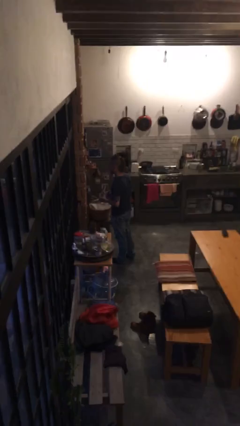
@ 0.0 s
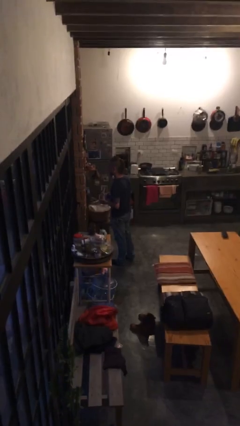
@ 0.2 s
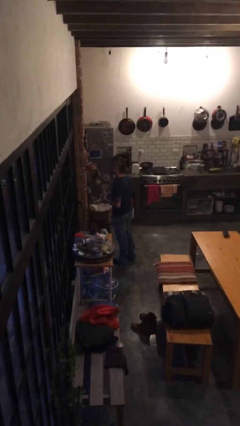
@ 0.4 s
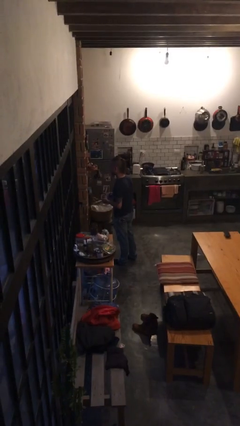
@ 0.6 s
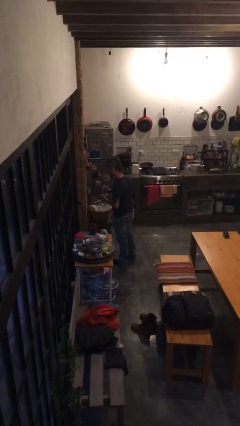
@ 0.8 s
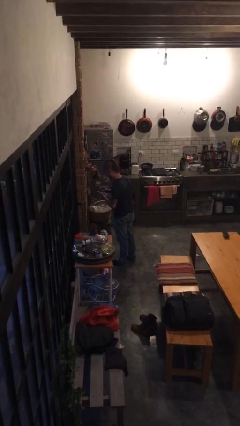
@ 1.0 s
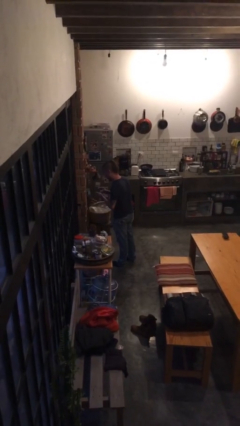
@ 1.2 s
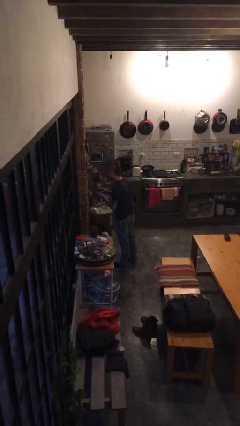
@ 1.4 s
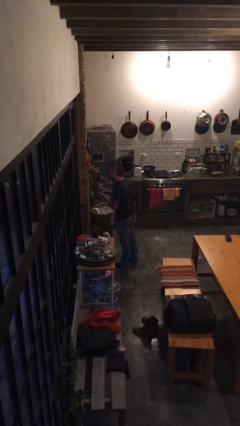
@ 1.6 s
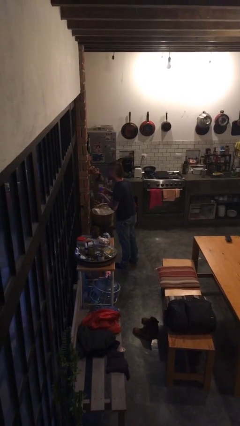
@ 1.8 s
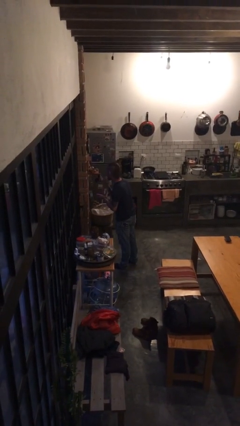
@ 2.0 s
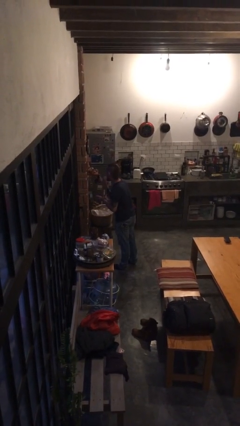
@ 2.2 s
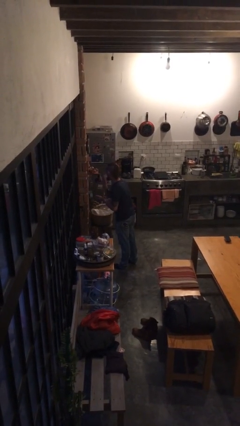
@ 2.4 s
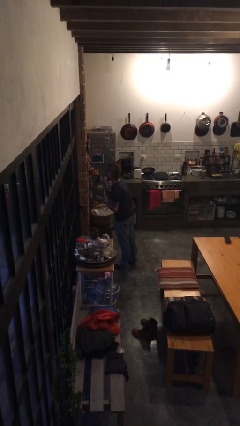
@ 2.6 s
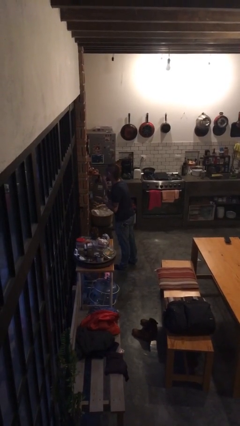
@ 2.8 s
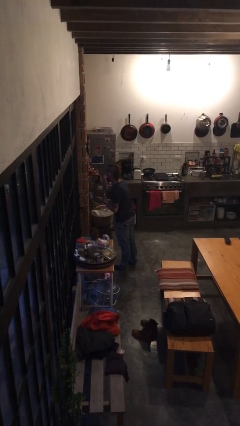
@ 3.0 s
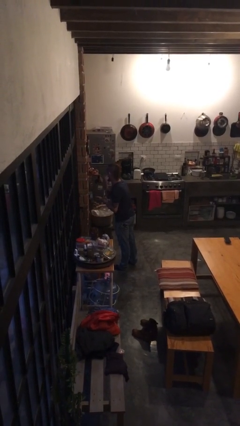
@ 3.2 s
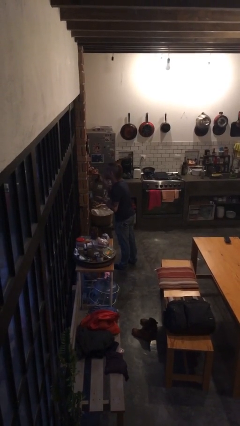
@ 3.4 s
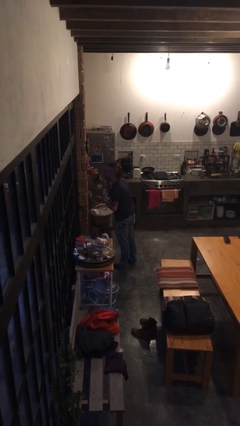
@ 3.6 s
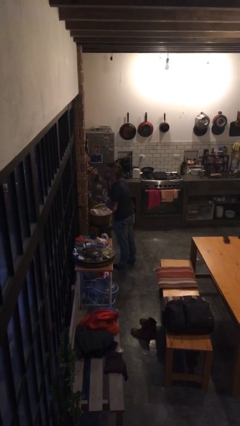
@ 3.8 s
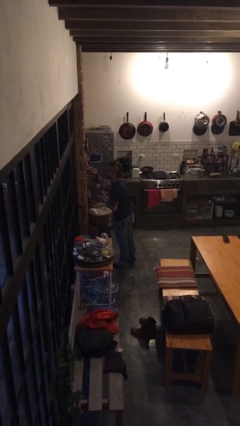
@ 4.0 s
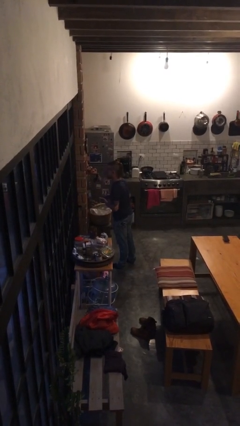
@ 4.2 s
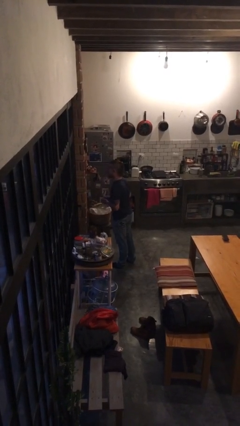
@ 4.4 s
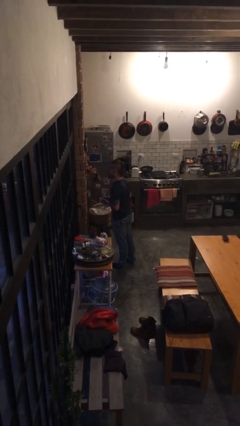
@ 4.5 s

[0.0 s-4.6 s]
person applies foundation makeup

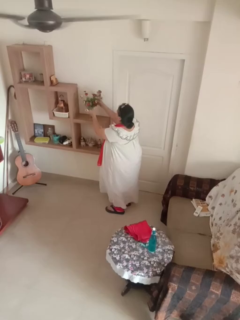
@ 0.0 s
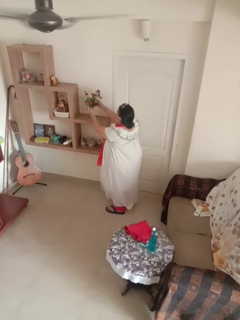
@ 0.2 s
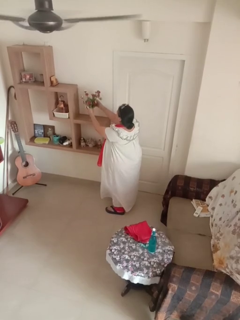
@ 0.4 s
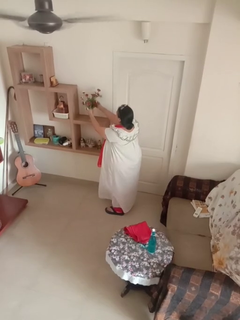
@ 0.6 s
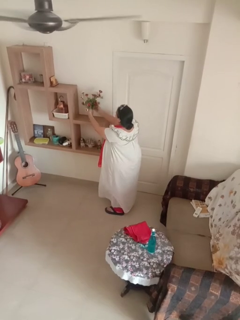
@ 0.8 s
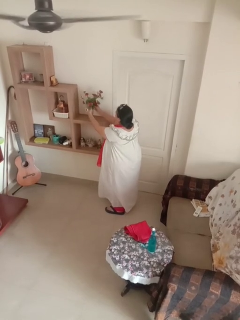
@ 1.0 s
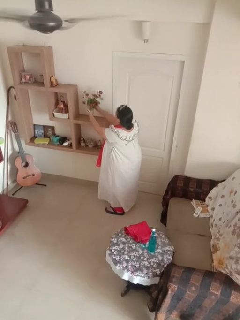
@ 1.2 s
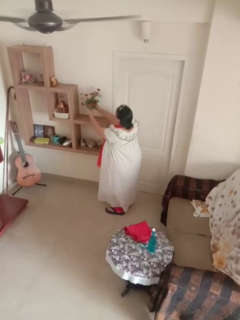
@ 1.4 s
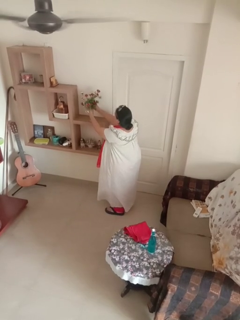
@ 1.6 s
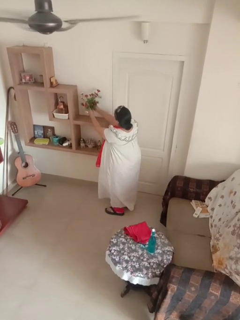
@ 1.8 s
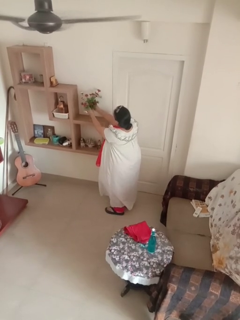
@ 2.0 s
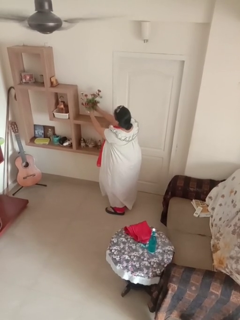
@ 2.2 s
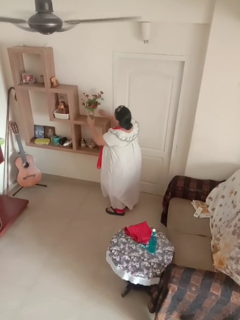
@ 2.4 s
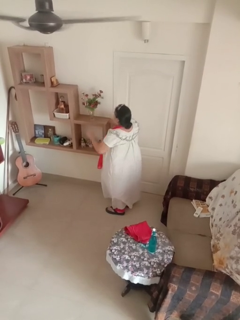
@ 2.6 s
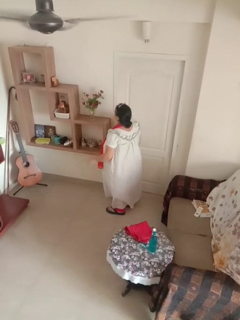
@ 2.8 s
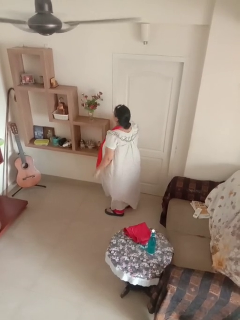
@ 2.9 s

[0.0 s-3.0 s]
person arranges flowers in vase

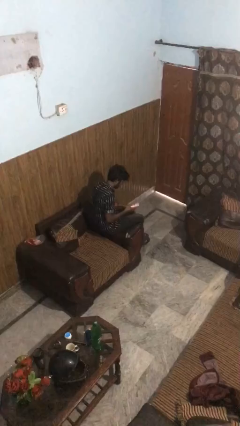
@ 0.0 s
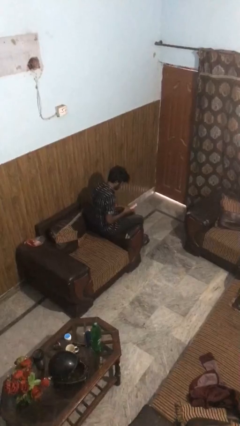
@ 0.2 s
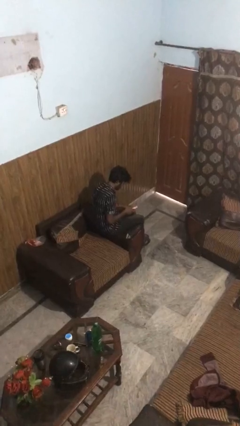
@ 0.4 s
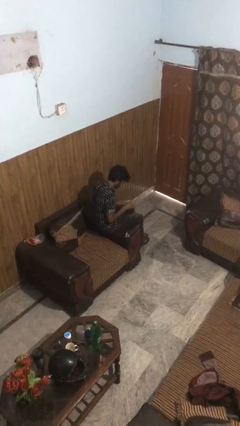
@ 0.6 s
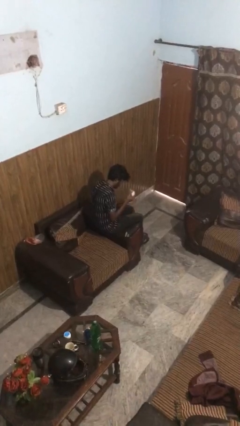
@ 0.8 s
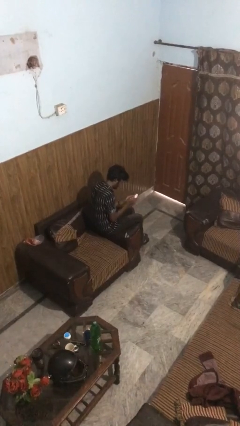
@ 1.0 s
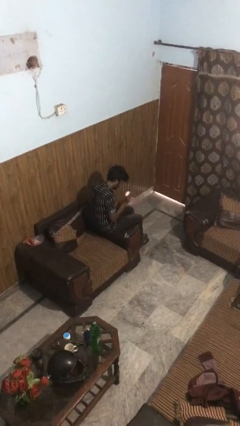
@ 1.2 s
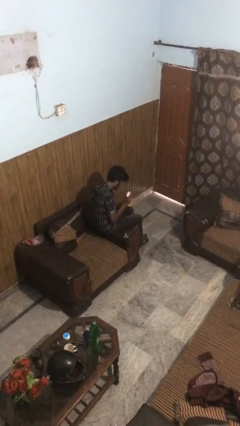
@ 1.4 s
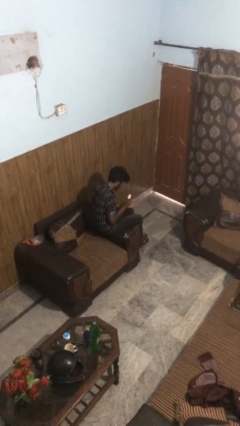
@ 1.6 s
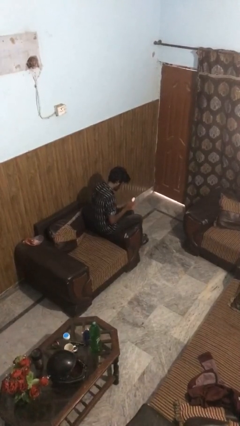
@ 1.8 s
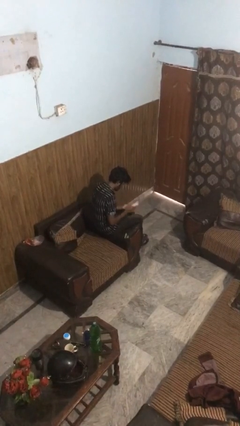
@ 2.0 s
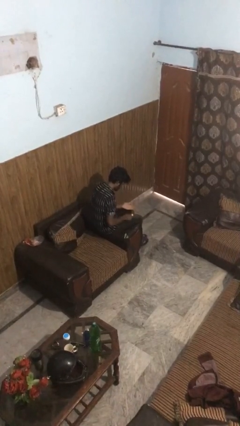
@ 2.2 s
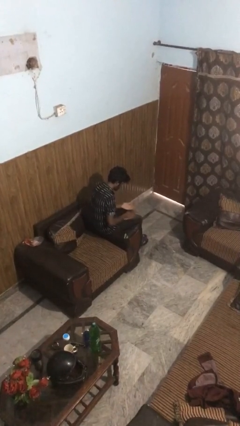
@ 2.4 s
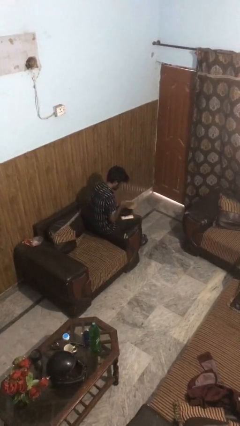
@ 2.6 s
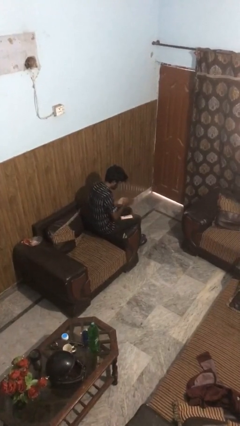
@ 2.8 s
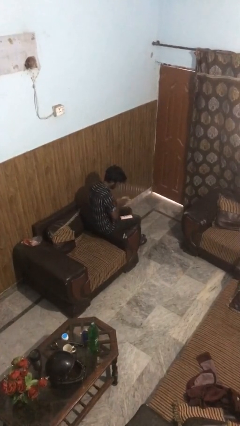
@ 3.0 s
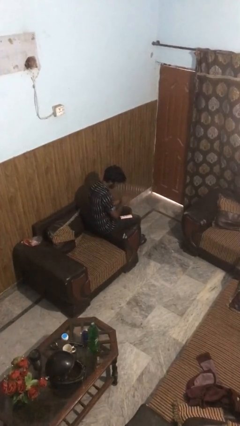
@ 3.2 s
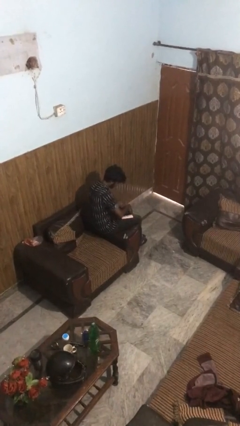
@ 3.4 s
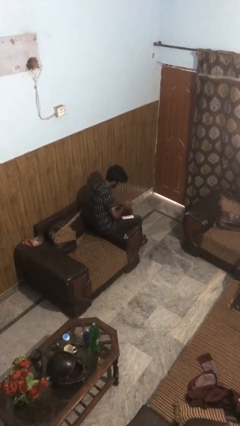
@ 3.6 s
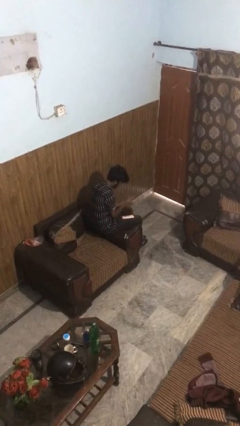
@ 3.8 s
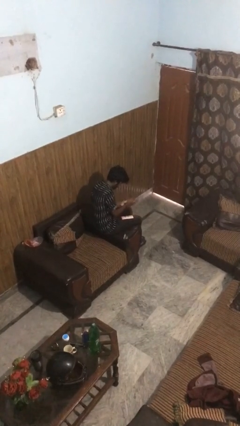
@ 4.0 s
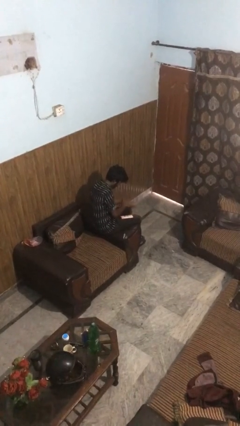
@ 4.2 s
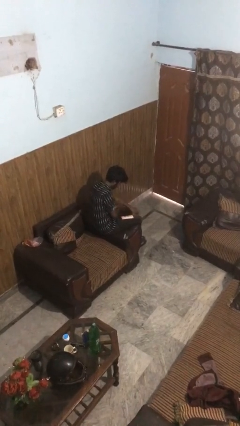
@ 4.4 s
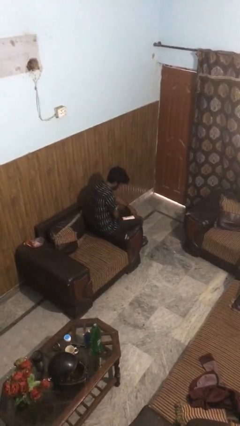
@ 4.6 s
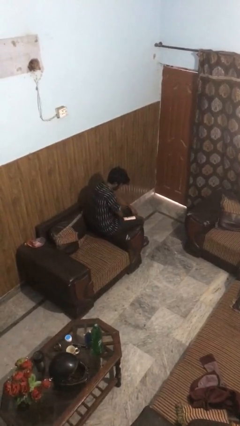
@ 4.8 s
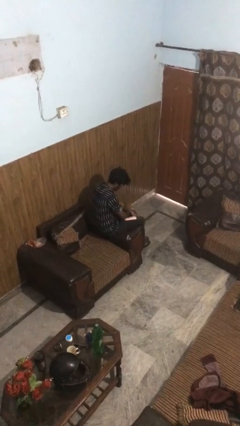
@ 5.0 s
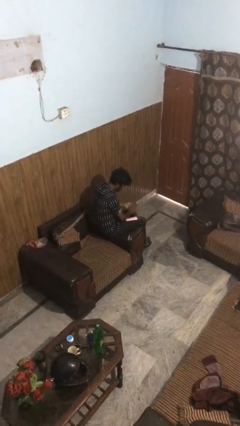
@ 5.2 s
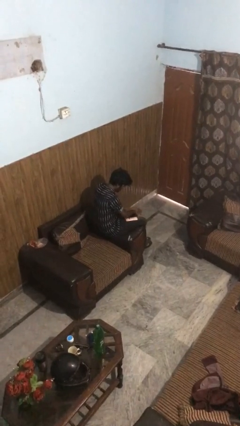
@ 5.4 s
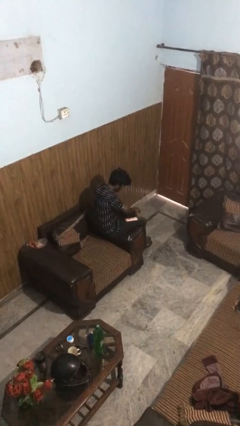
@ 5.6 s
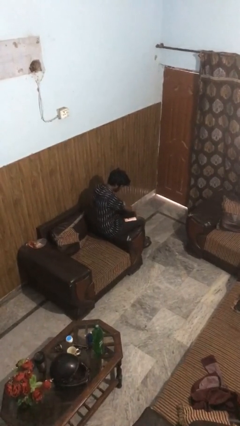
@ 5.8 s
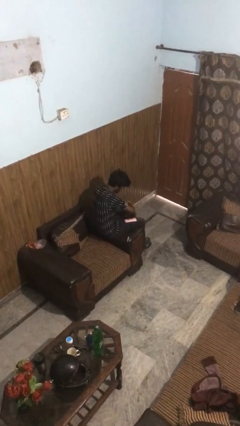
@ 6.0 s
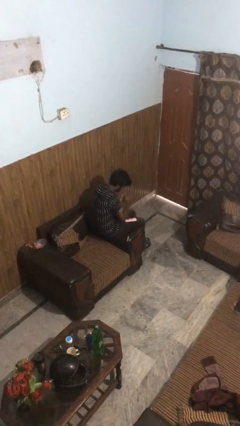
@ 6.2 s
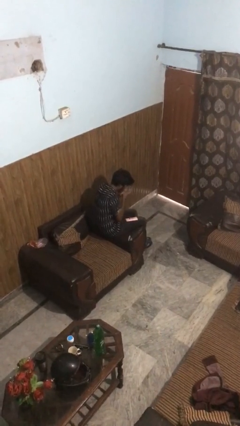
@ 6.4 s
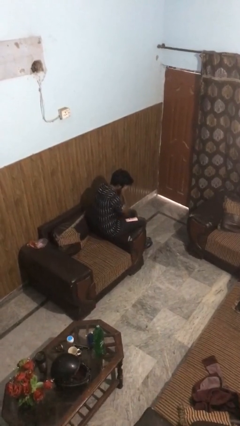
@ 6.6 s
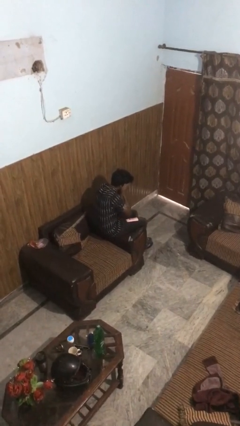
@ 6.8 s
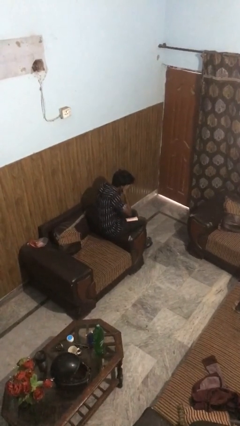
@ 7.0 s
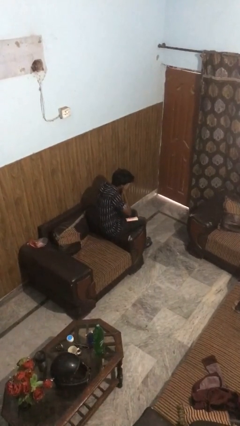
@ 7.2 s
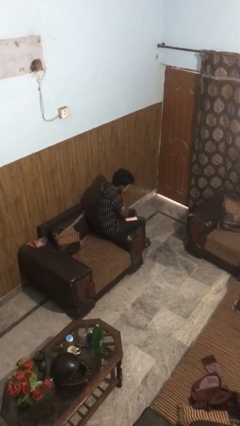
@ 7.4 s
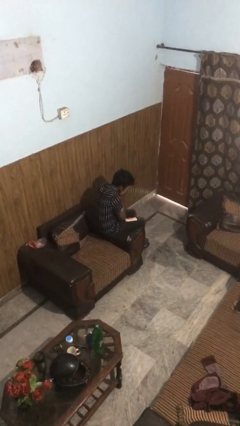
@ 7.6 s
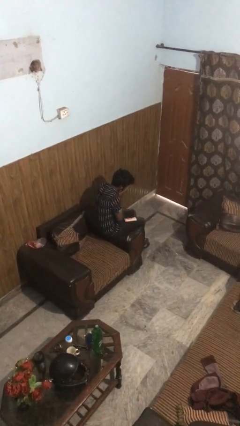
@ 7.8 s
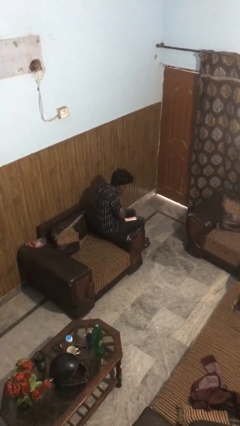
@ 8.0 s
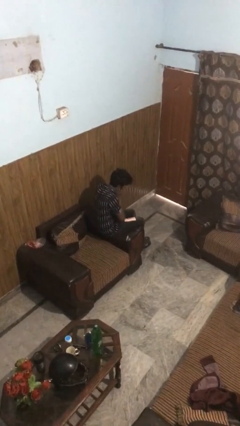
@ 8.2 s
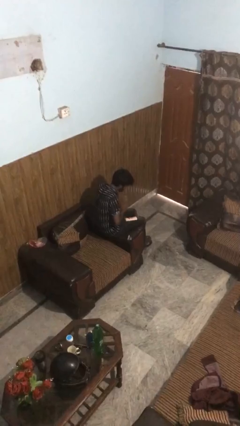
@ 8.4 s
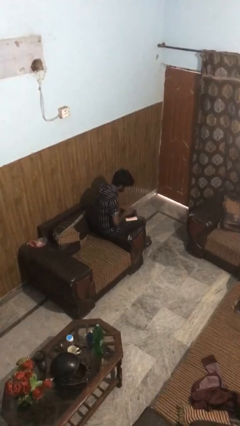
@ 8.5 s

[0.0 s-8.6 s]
person applies sunscreen

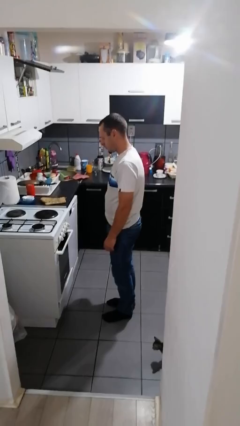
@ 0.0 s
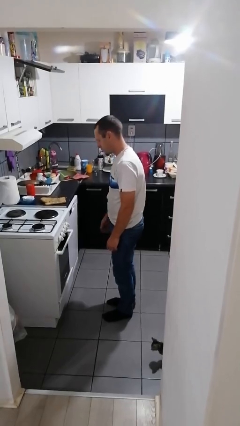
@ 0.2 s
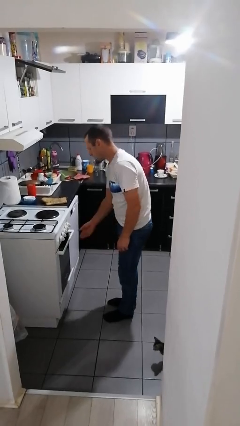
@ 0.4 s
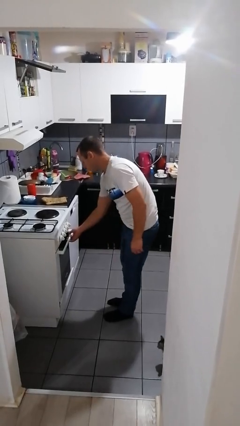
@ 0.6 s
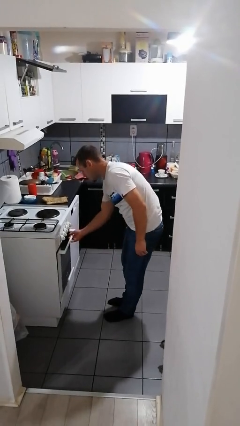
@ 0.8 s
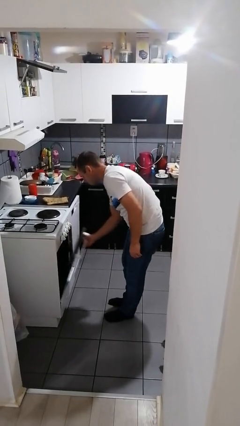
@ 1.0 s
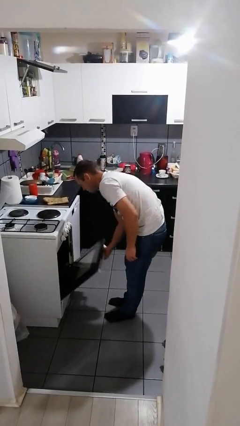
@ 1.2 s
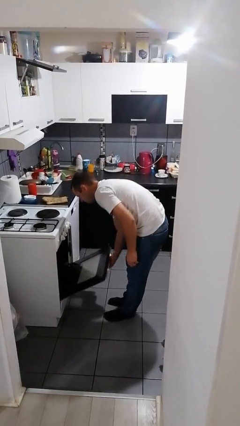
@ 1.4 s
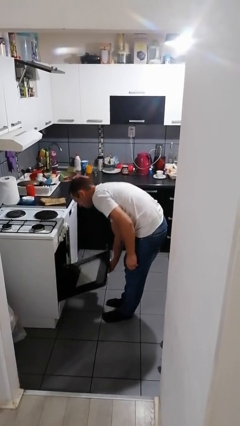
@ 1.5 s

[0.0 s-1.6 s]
person opens oven door

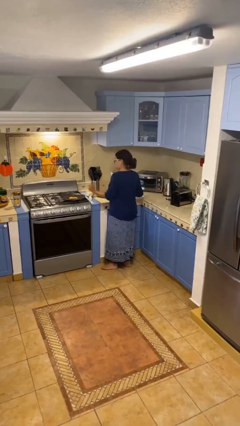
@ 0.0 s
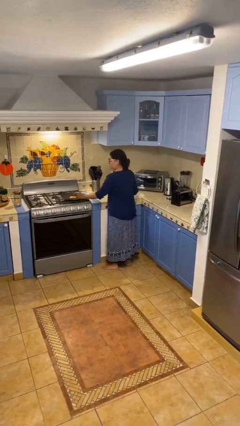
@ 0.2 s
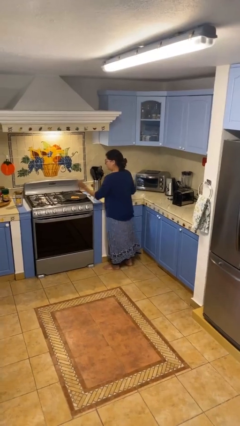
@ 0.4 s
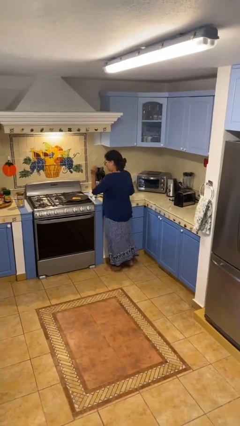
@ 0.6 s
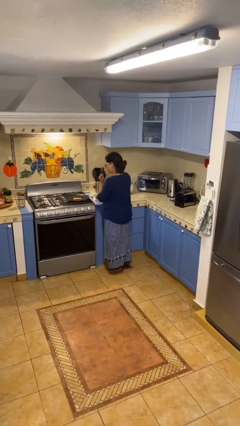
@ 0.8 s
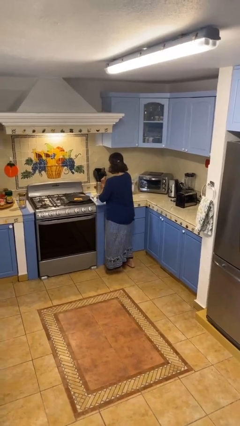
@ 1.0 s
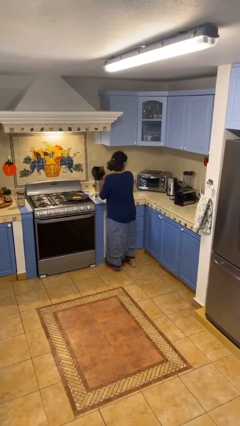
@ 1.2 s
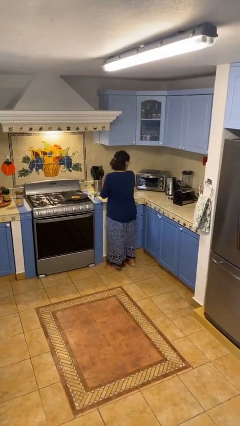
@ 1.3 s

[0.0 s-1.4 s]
person burns hand
